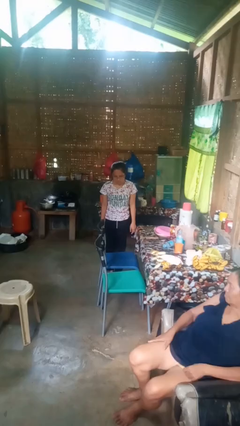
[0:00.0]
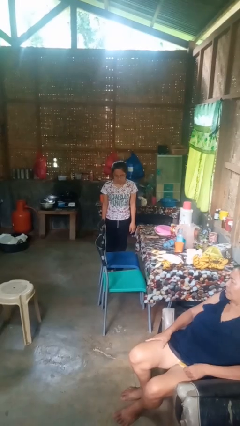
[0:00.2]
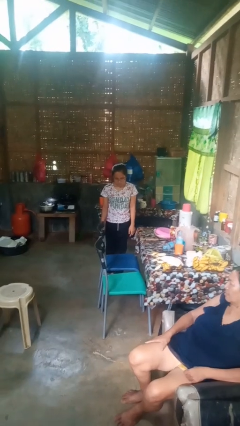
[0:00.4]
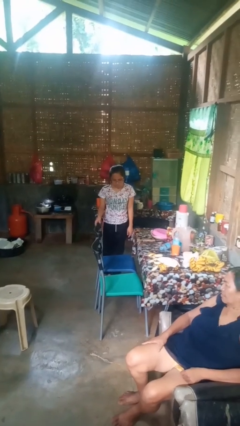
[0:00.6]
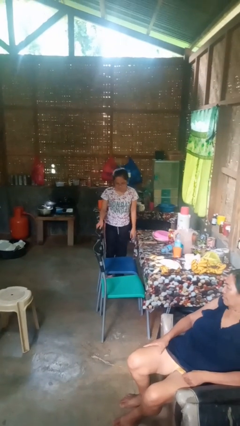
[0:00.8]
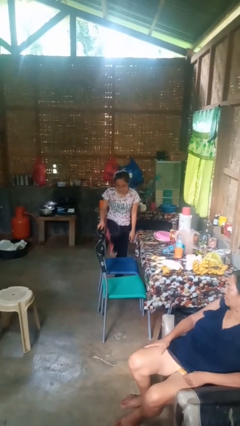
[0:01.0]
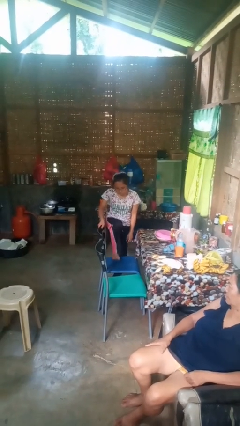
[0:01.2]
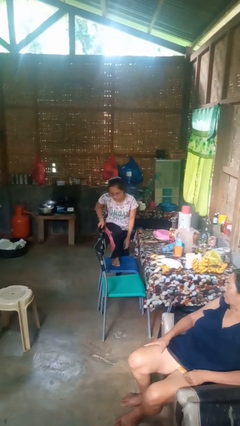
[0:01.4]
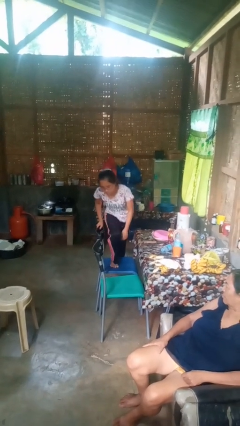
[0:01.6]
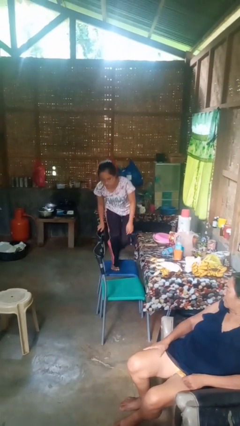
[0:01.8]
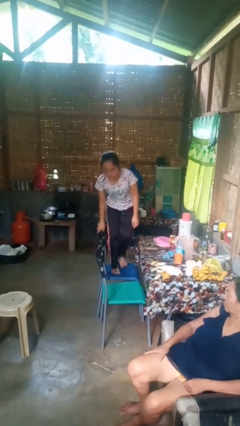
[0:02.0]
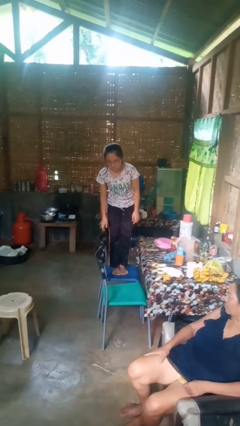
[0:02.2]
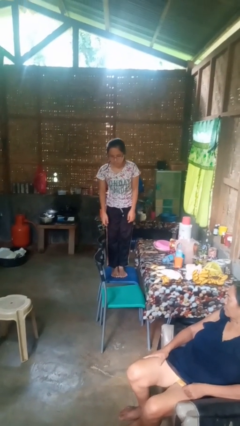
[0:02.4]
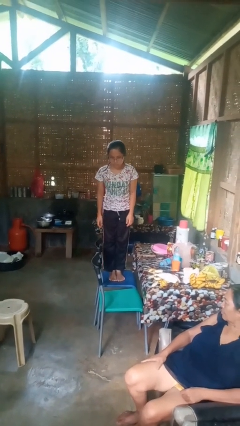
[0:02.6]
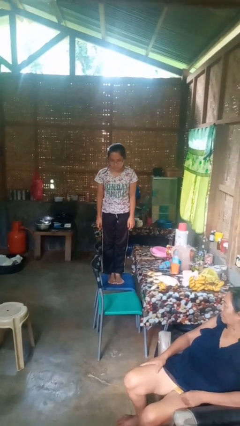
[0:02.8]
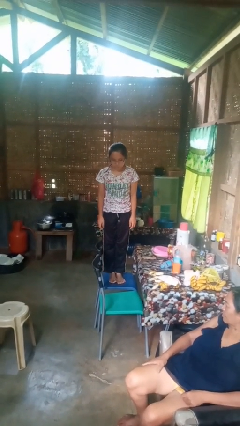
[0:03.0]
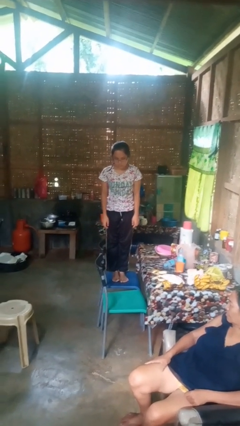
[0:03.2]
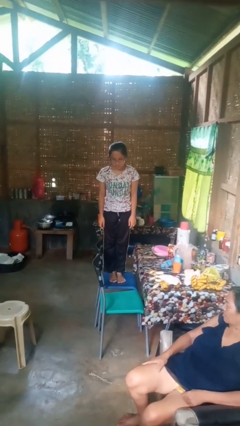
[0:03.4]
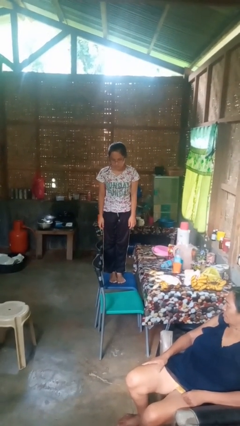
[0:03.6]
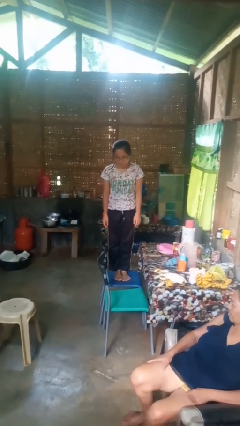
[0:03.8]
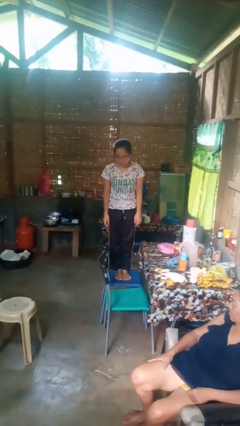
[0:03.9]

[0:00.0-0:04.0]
person climbs on chair

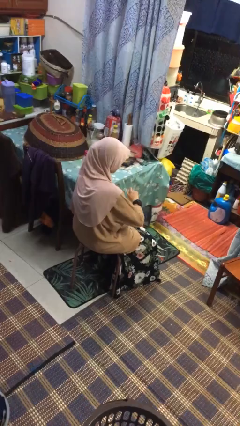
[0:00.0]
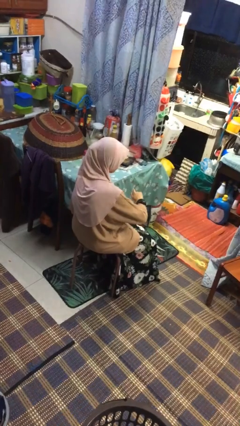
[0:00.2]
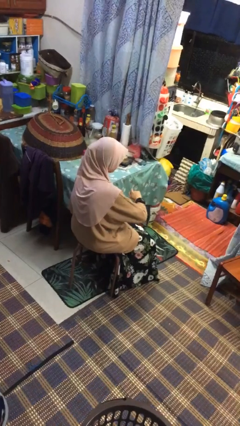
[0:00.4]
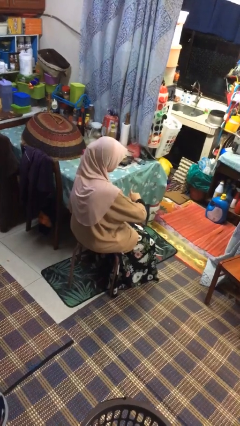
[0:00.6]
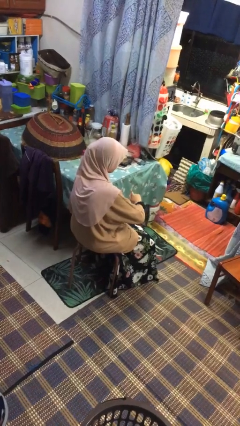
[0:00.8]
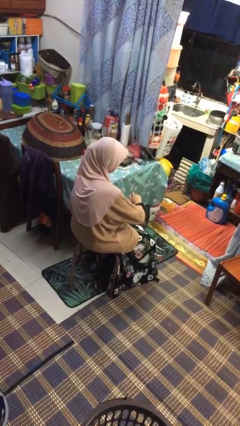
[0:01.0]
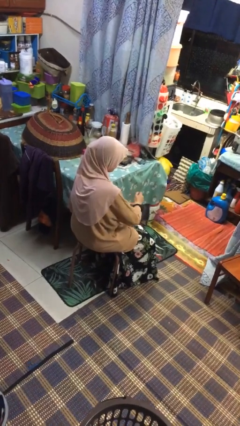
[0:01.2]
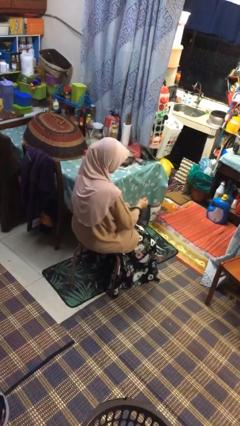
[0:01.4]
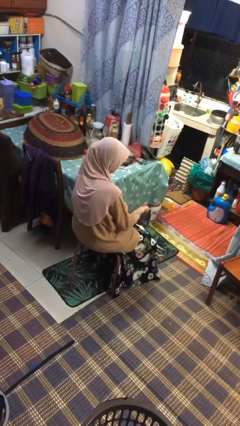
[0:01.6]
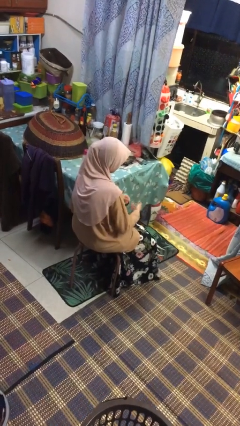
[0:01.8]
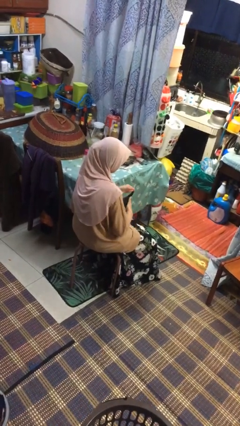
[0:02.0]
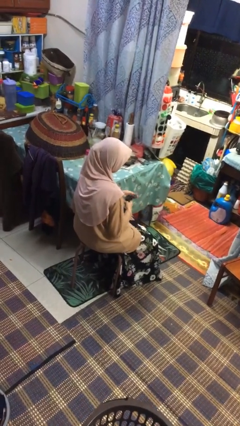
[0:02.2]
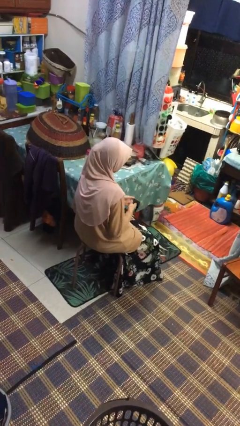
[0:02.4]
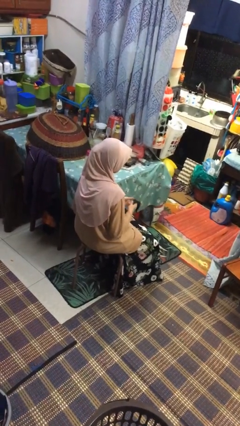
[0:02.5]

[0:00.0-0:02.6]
person takes off wristwatch

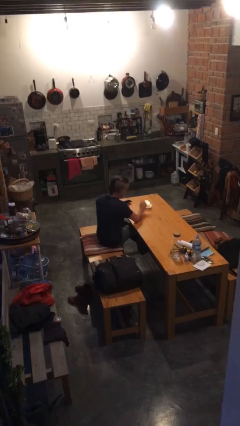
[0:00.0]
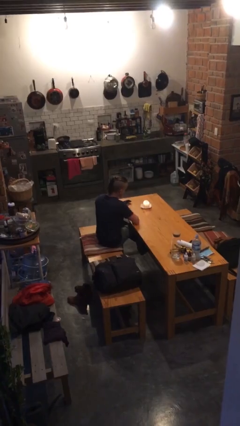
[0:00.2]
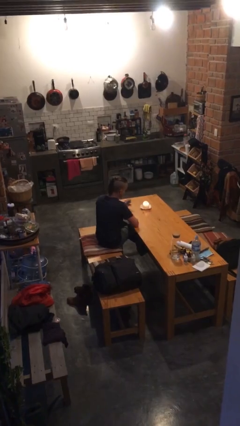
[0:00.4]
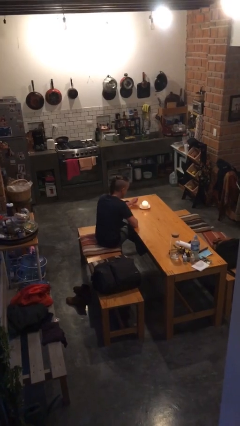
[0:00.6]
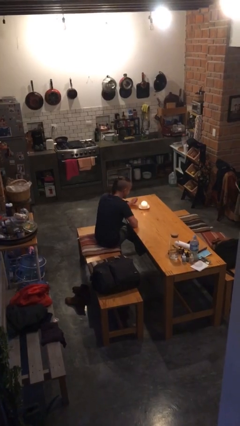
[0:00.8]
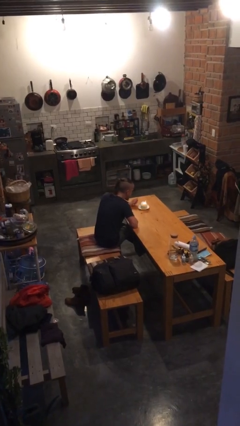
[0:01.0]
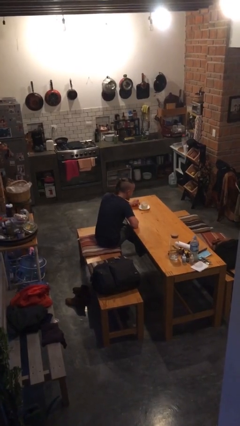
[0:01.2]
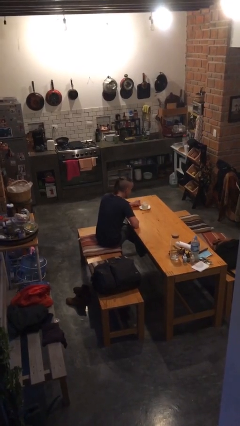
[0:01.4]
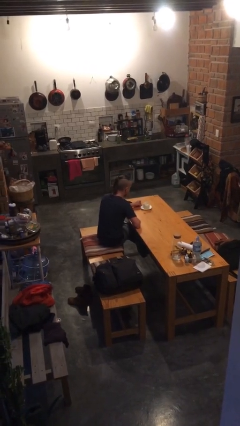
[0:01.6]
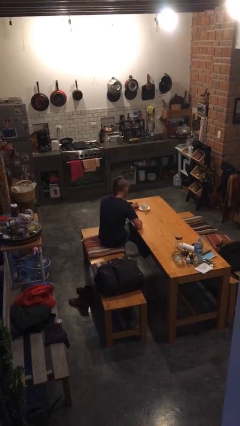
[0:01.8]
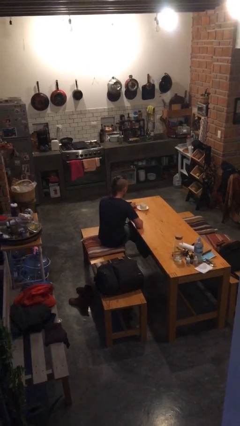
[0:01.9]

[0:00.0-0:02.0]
person extinguishes candle

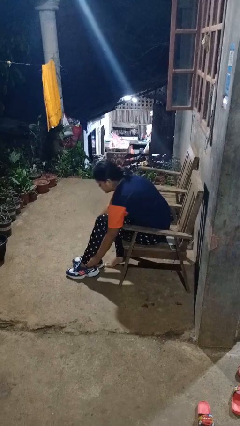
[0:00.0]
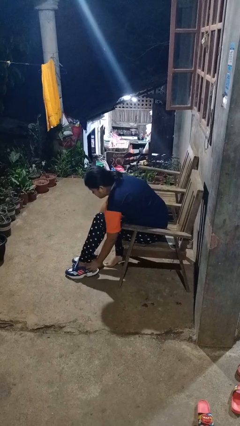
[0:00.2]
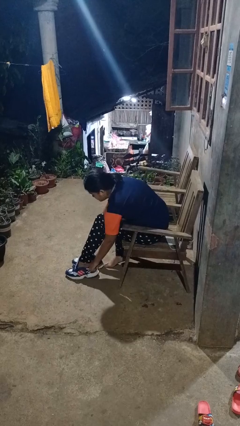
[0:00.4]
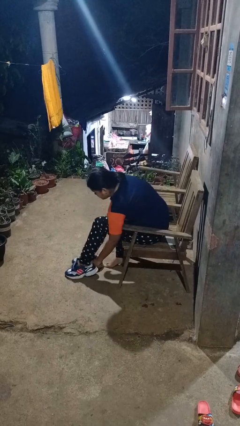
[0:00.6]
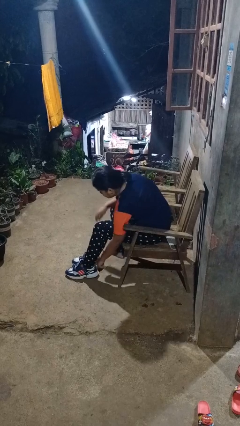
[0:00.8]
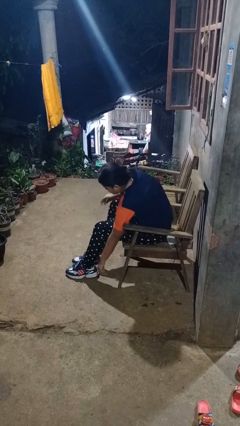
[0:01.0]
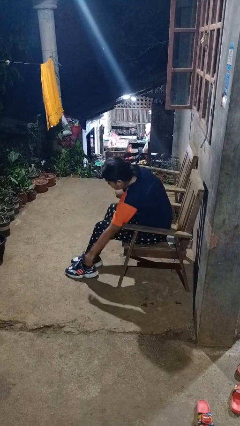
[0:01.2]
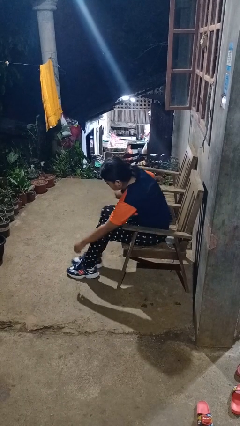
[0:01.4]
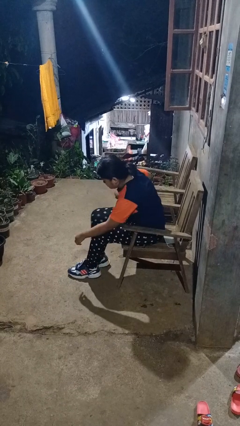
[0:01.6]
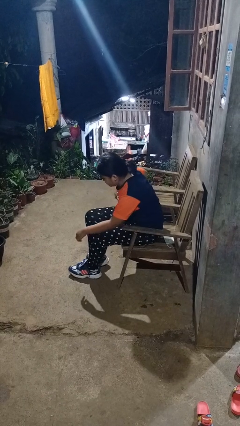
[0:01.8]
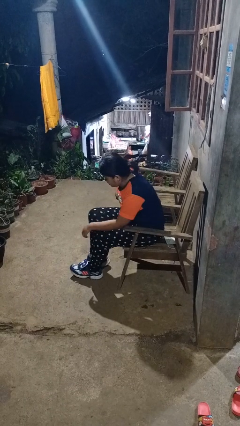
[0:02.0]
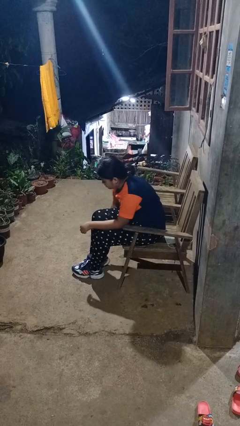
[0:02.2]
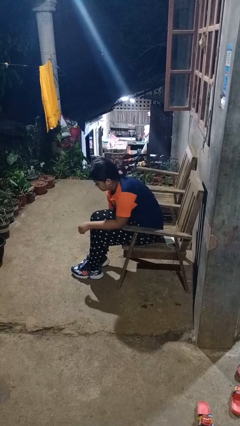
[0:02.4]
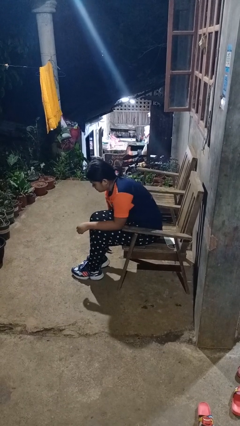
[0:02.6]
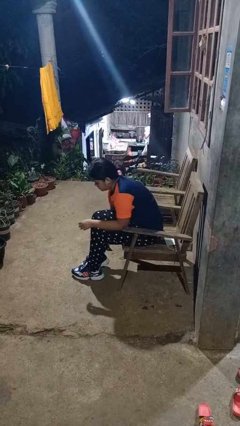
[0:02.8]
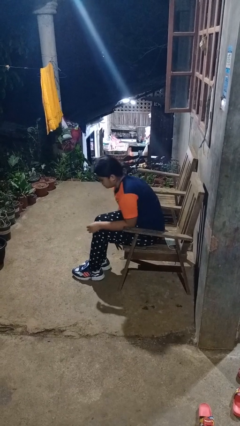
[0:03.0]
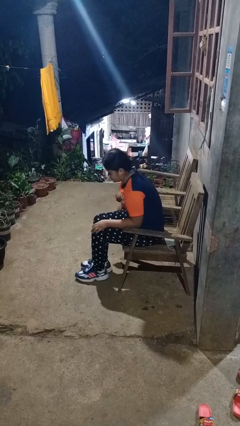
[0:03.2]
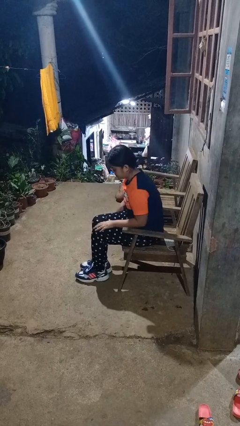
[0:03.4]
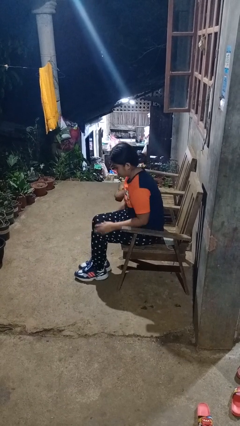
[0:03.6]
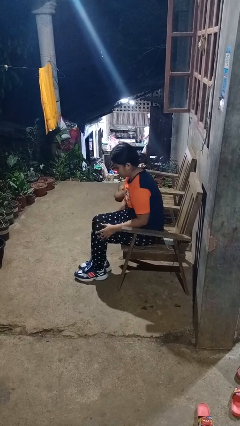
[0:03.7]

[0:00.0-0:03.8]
person puts on shoes

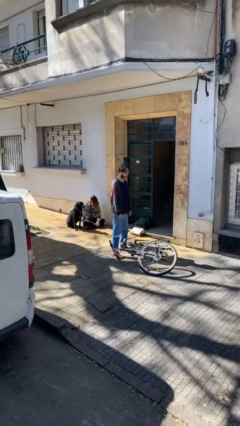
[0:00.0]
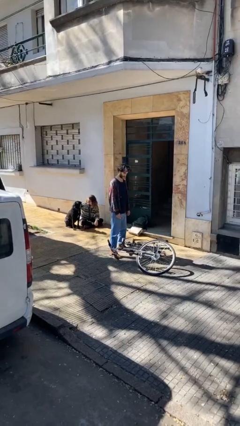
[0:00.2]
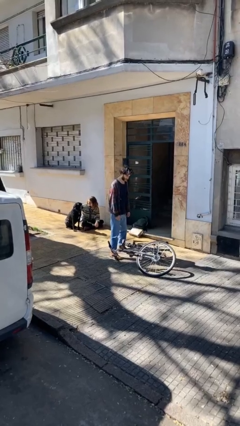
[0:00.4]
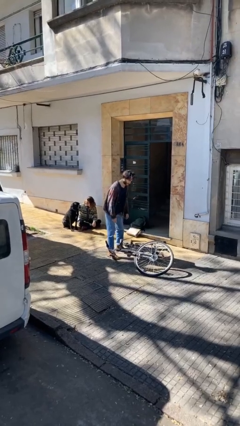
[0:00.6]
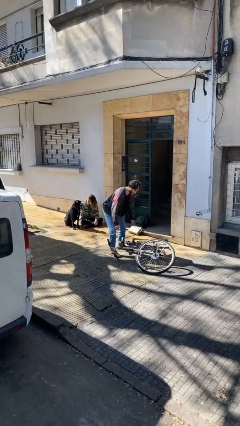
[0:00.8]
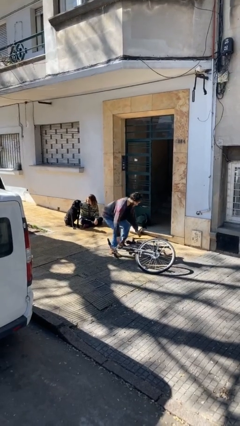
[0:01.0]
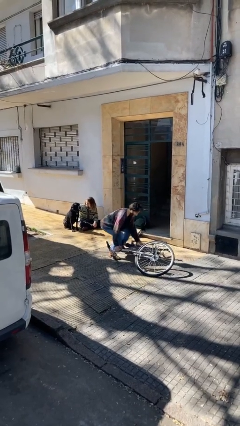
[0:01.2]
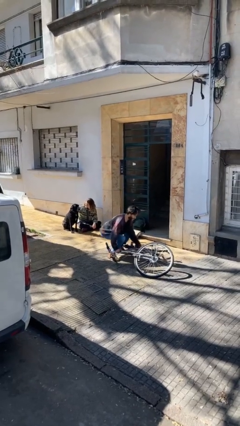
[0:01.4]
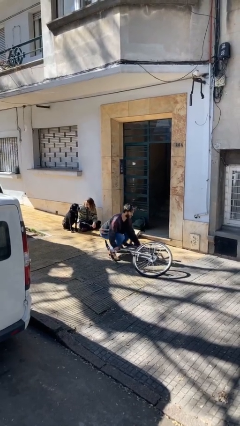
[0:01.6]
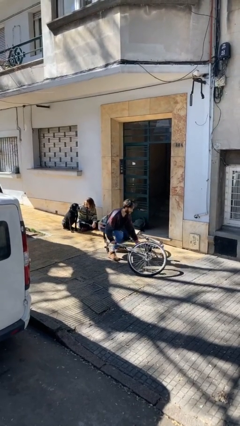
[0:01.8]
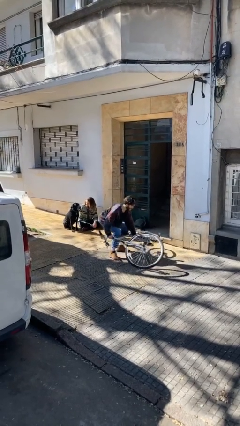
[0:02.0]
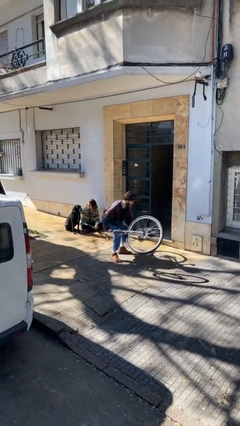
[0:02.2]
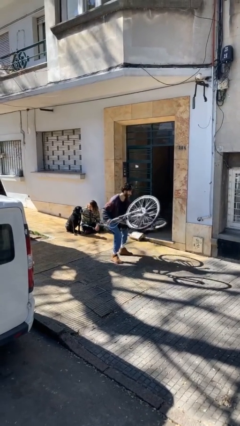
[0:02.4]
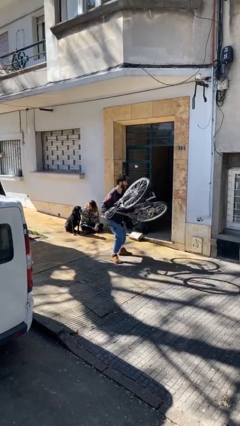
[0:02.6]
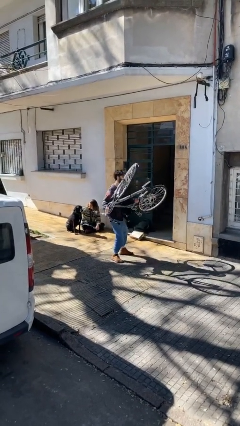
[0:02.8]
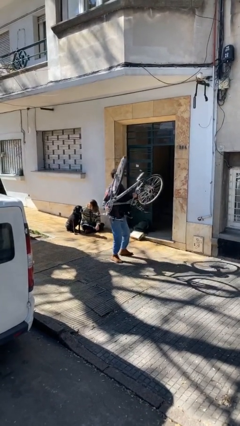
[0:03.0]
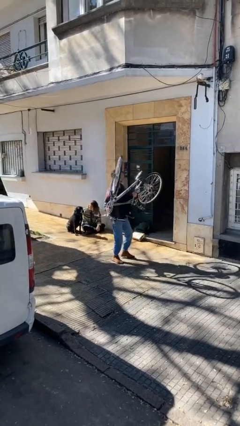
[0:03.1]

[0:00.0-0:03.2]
person picks up object from floor

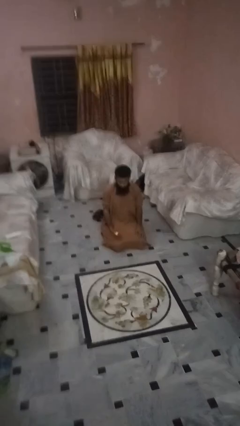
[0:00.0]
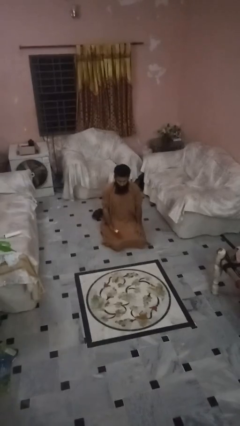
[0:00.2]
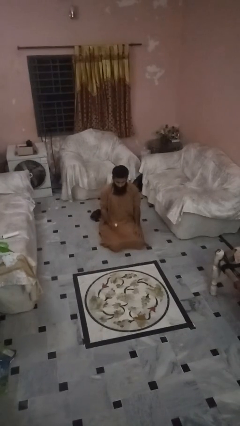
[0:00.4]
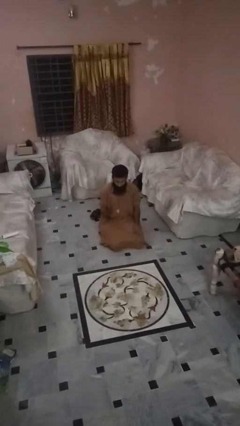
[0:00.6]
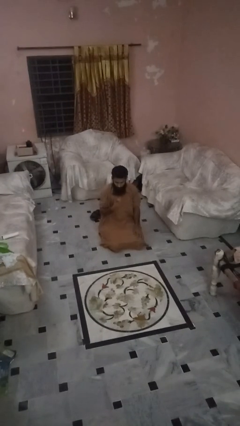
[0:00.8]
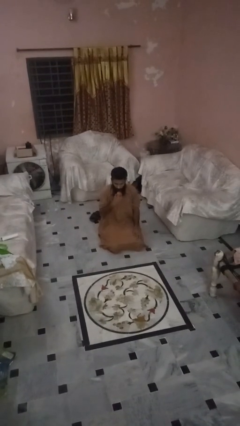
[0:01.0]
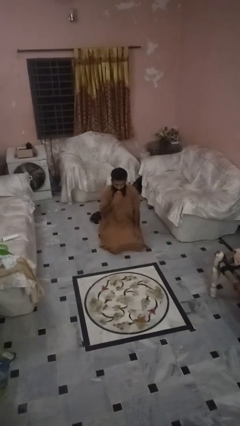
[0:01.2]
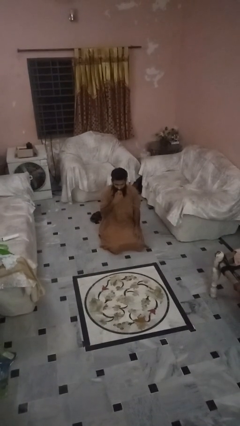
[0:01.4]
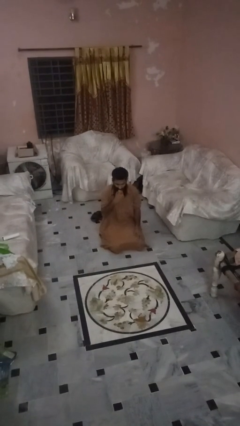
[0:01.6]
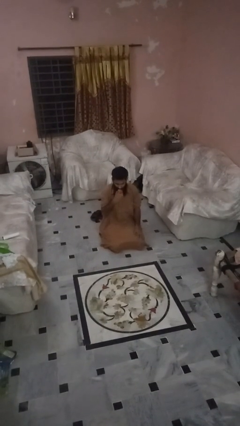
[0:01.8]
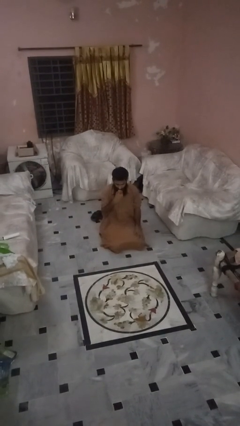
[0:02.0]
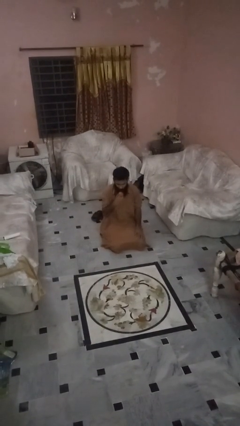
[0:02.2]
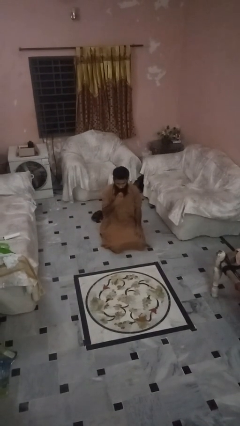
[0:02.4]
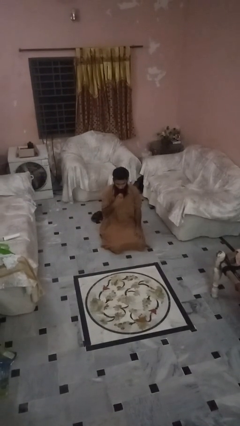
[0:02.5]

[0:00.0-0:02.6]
person eats apple
